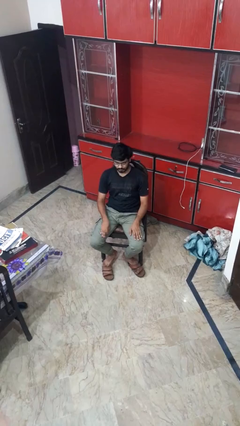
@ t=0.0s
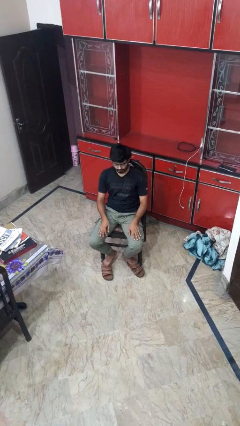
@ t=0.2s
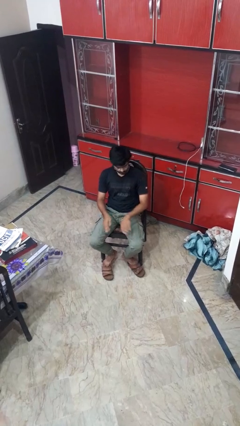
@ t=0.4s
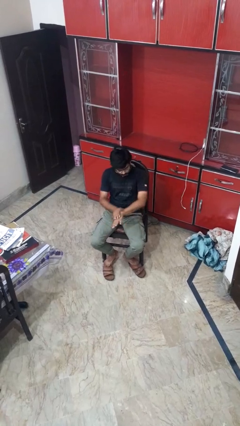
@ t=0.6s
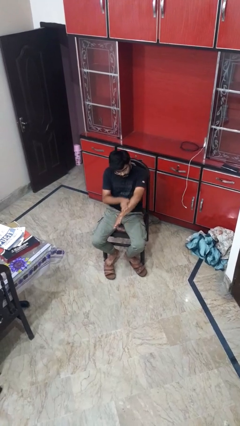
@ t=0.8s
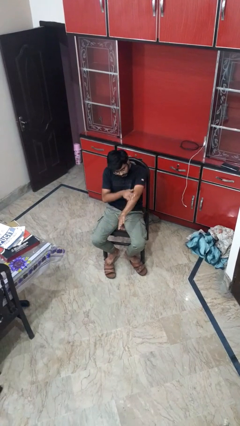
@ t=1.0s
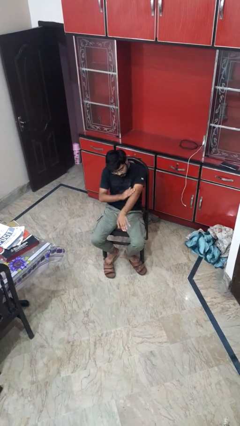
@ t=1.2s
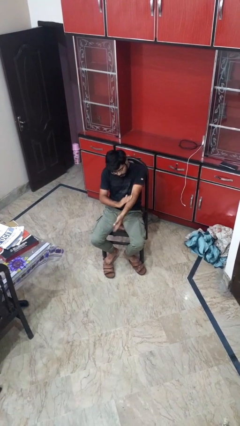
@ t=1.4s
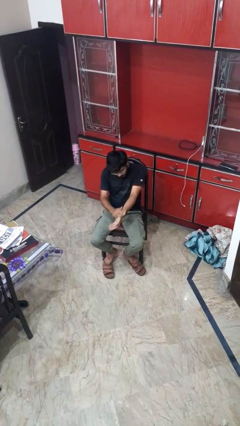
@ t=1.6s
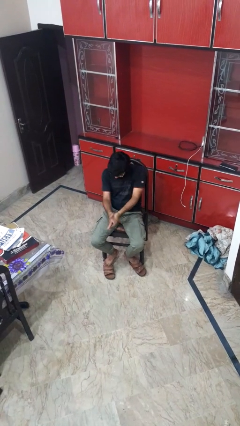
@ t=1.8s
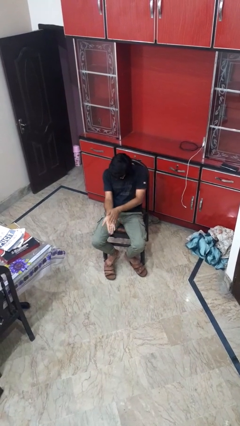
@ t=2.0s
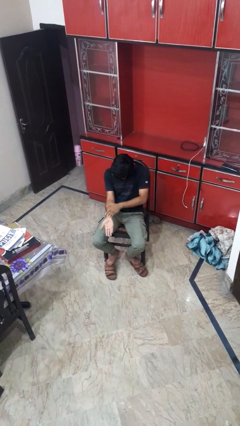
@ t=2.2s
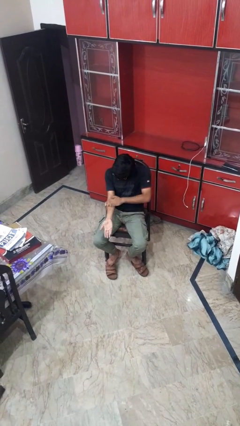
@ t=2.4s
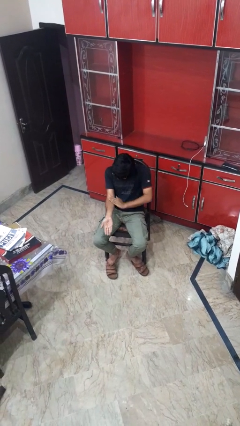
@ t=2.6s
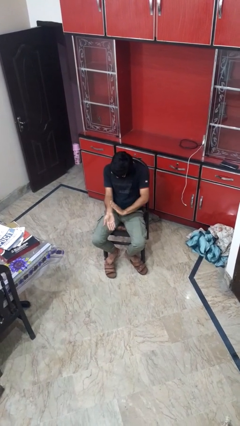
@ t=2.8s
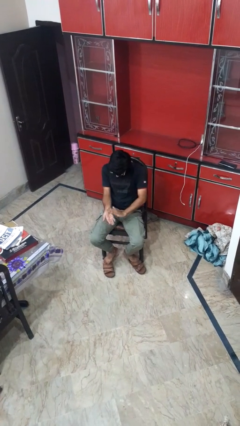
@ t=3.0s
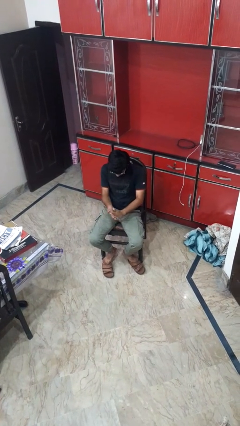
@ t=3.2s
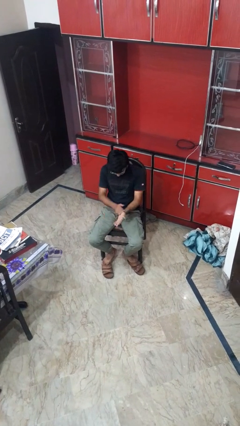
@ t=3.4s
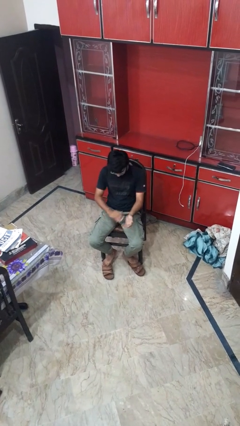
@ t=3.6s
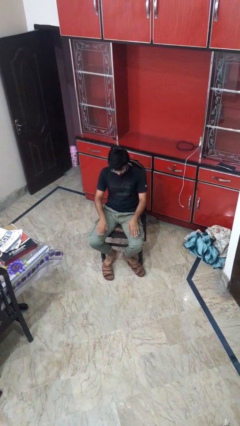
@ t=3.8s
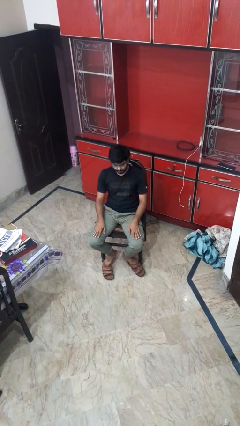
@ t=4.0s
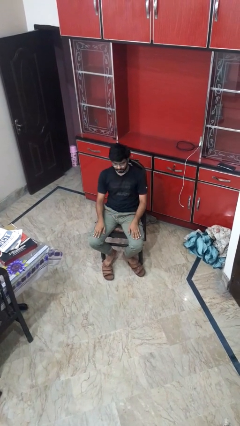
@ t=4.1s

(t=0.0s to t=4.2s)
person looks at hands in lap

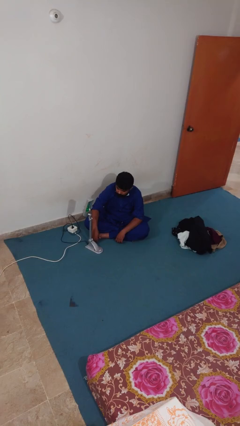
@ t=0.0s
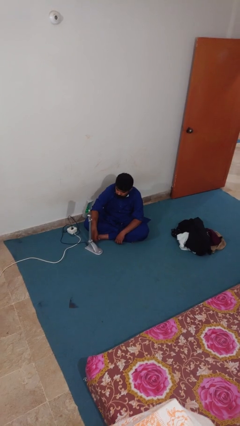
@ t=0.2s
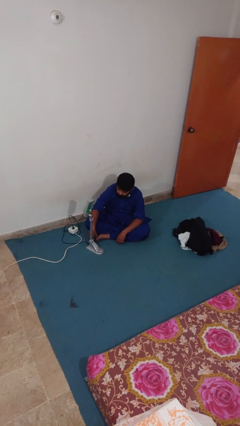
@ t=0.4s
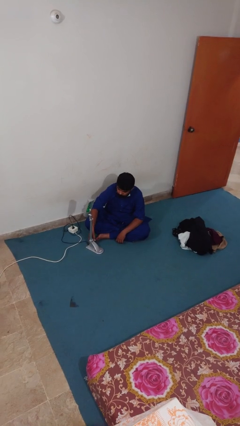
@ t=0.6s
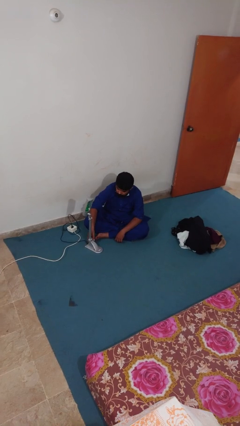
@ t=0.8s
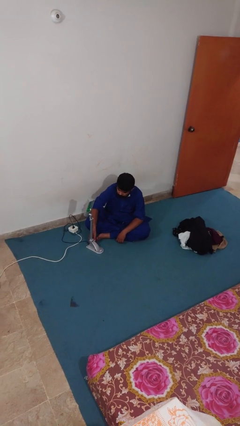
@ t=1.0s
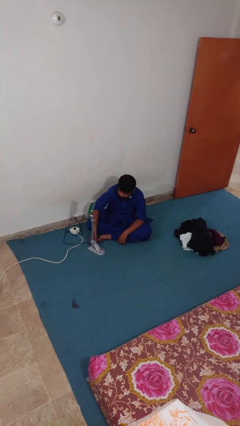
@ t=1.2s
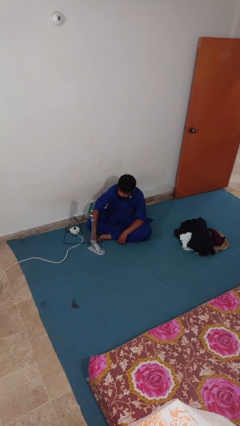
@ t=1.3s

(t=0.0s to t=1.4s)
person turns on lamp

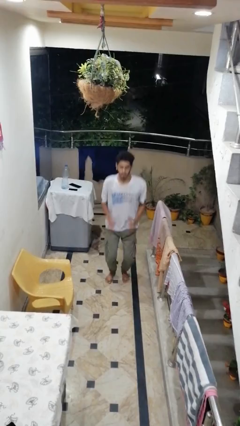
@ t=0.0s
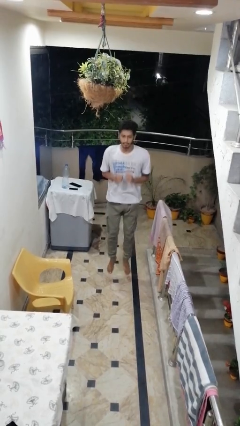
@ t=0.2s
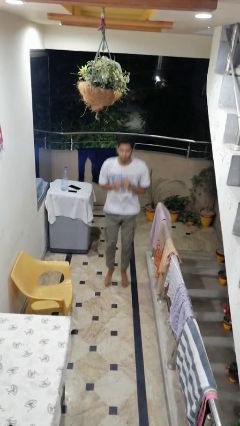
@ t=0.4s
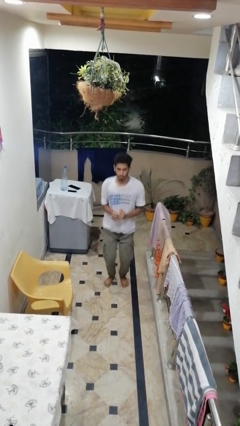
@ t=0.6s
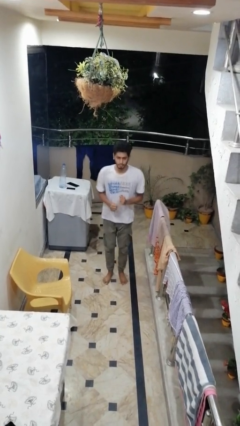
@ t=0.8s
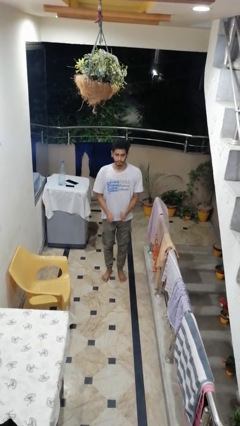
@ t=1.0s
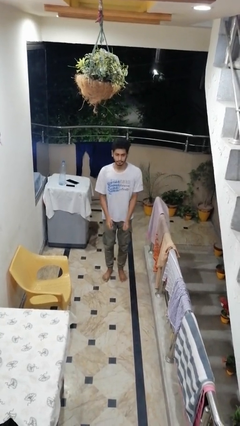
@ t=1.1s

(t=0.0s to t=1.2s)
person jumps

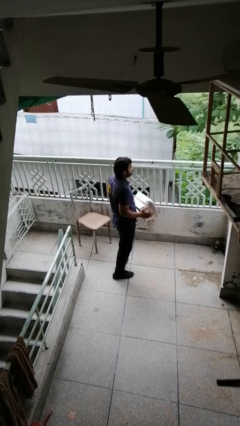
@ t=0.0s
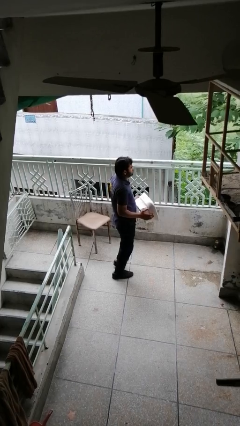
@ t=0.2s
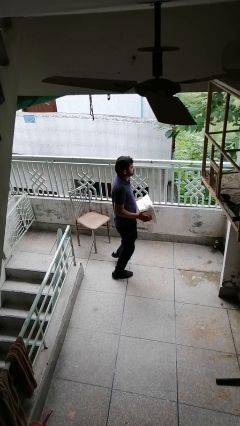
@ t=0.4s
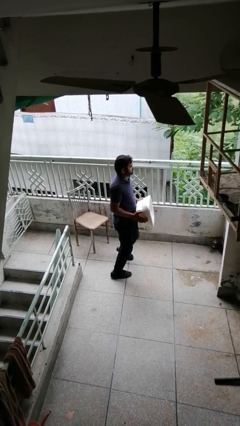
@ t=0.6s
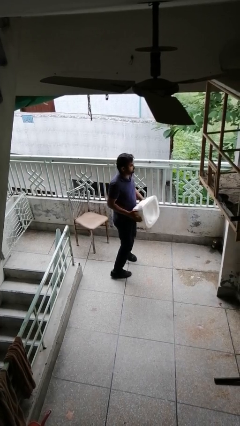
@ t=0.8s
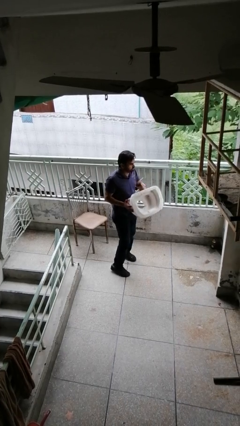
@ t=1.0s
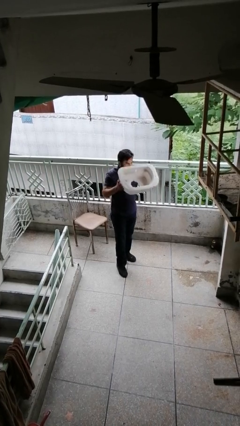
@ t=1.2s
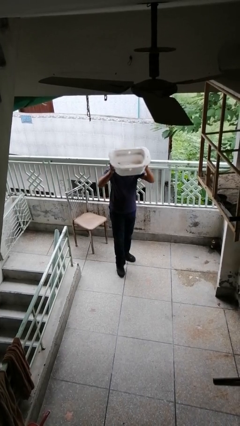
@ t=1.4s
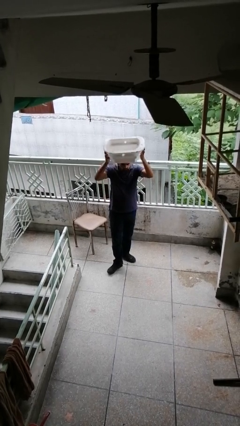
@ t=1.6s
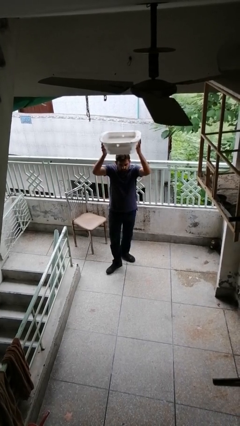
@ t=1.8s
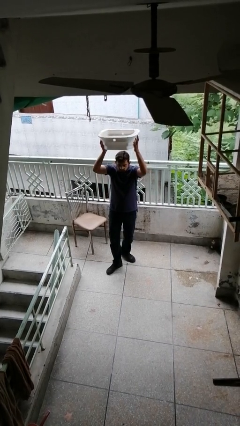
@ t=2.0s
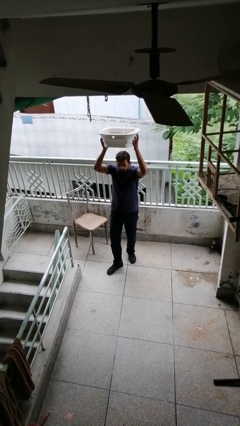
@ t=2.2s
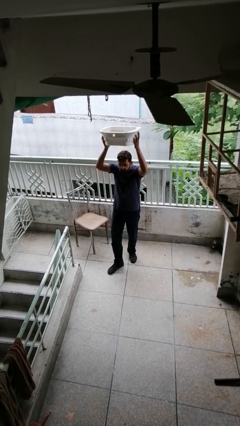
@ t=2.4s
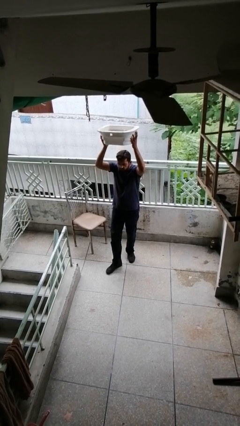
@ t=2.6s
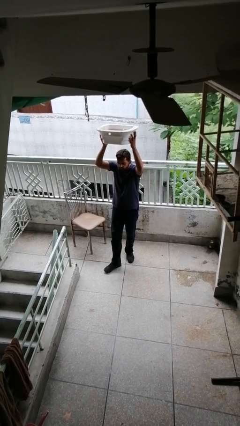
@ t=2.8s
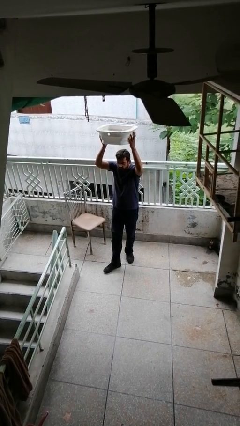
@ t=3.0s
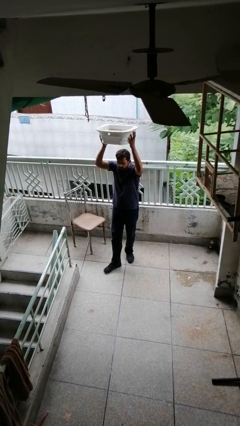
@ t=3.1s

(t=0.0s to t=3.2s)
person holds object above head

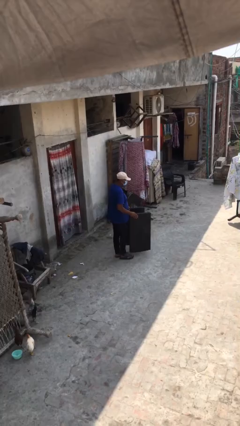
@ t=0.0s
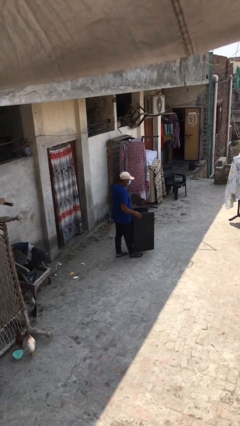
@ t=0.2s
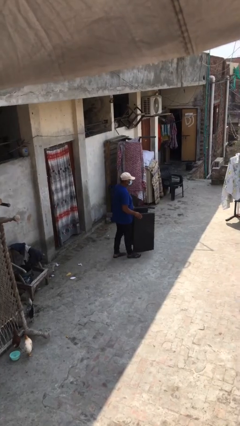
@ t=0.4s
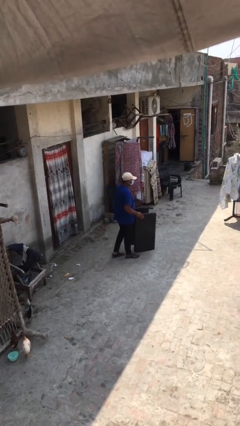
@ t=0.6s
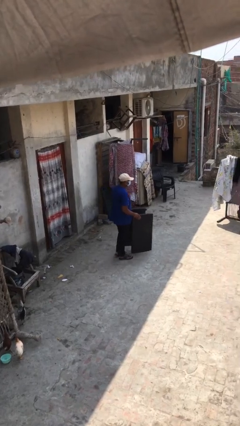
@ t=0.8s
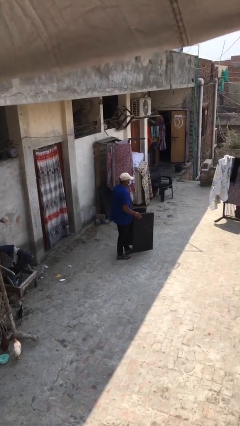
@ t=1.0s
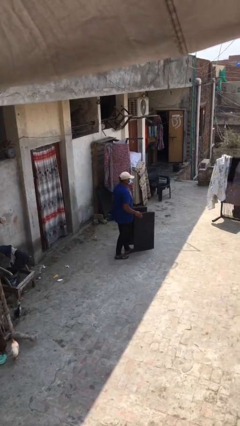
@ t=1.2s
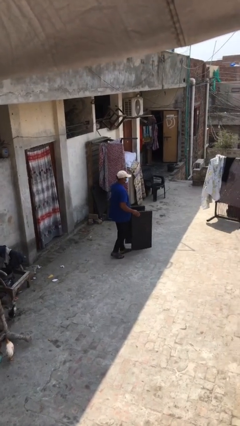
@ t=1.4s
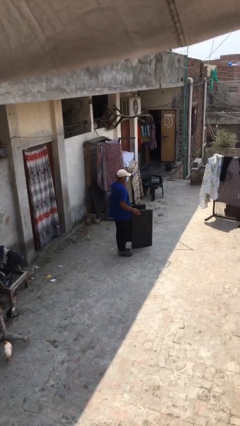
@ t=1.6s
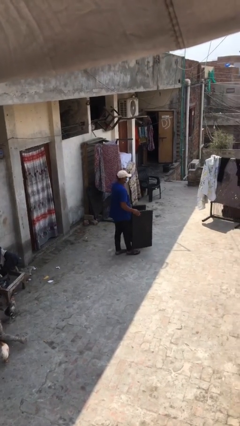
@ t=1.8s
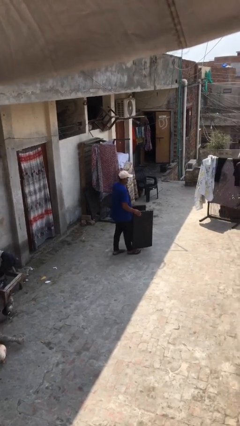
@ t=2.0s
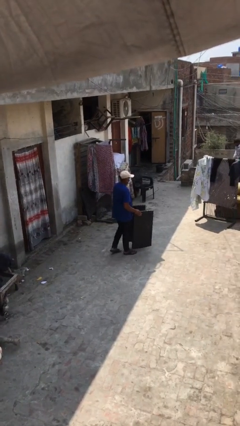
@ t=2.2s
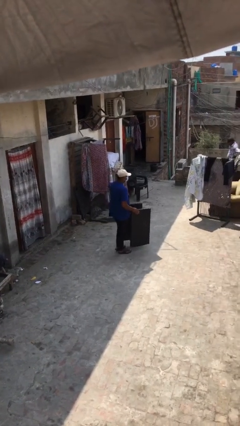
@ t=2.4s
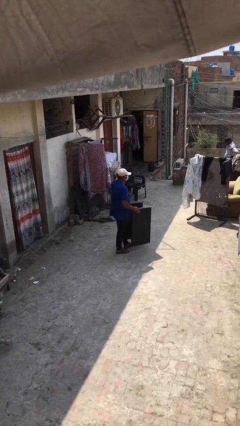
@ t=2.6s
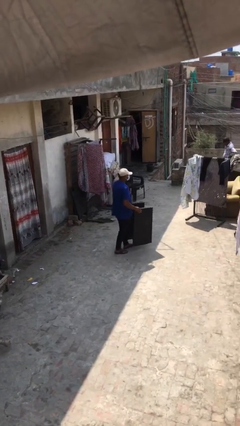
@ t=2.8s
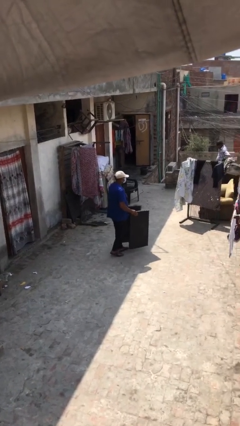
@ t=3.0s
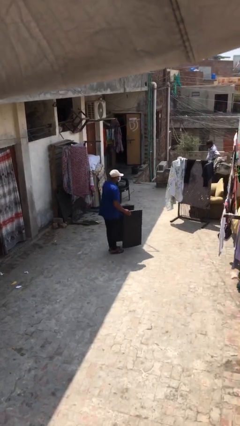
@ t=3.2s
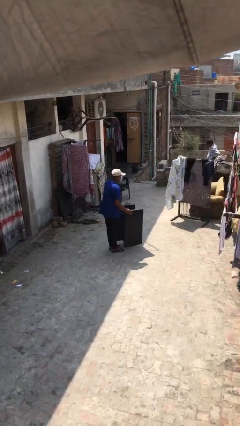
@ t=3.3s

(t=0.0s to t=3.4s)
person carries heavy object

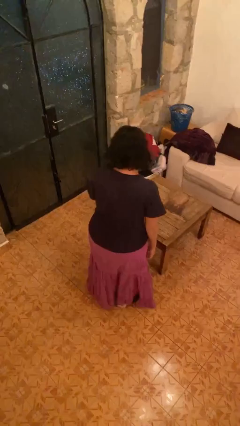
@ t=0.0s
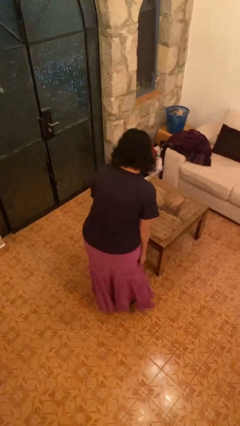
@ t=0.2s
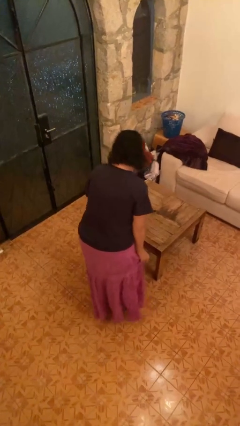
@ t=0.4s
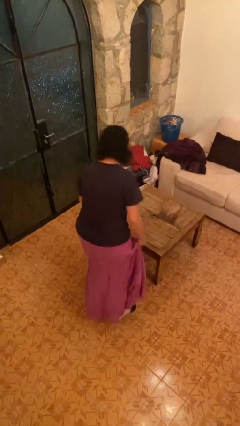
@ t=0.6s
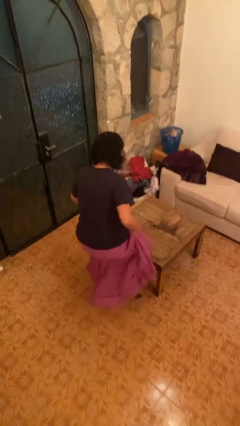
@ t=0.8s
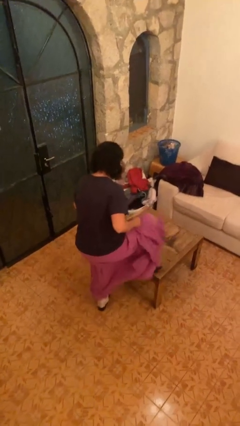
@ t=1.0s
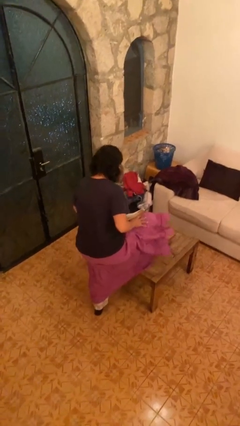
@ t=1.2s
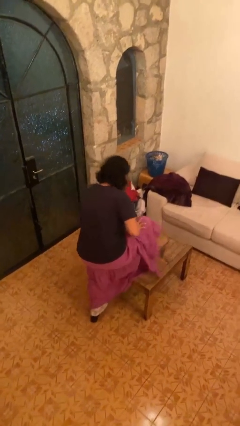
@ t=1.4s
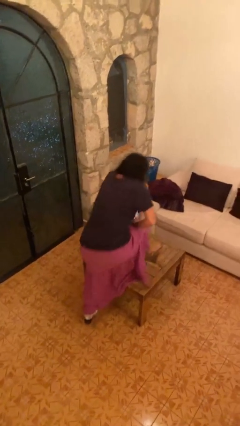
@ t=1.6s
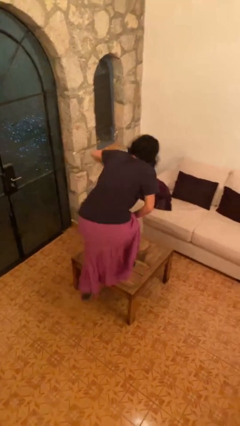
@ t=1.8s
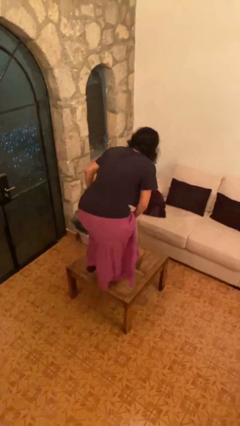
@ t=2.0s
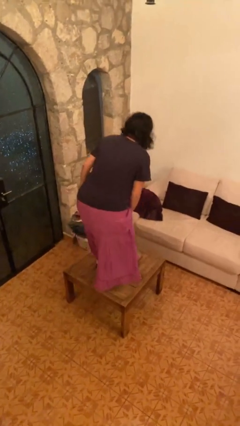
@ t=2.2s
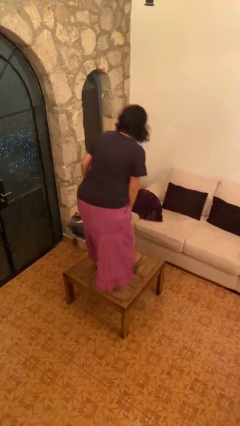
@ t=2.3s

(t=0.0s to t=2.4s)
person climbs on table

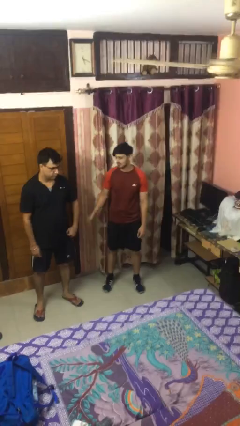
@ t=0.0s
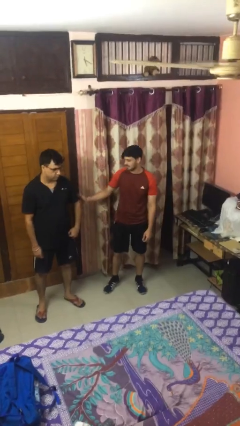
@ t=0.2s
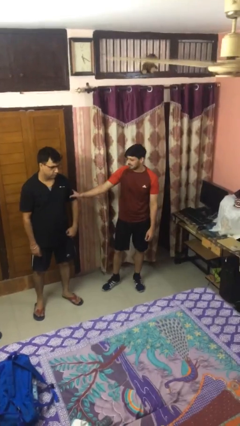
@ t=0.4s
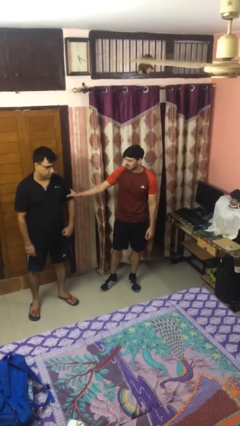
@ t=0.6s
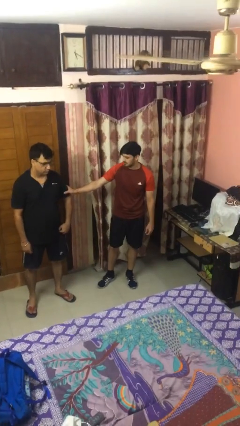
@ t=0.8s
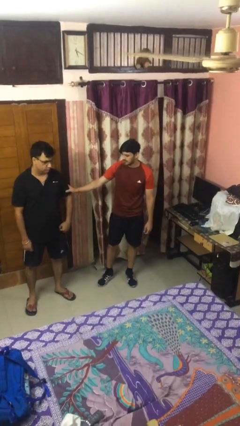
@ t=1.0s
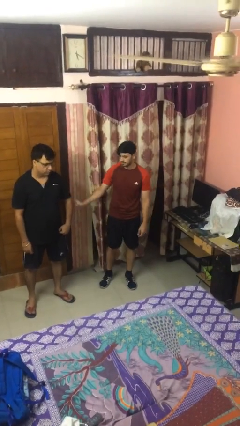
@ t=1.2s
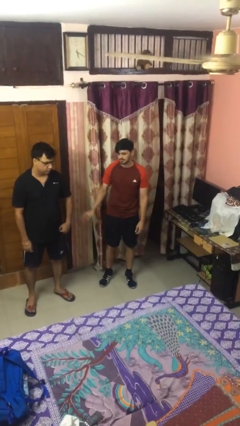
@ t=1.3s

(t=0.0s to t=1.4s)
person grabs person by bicep
